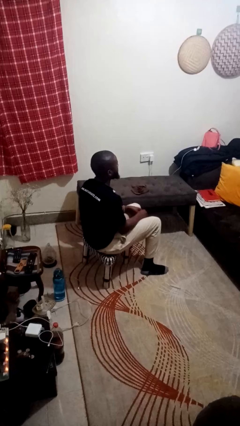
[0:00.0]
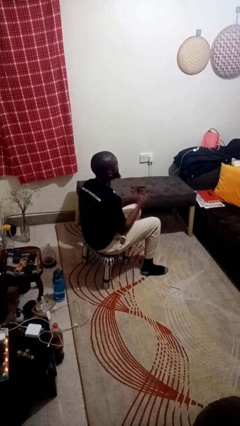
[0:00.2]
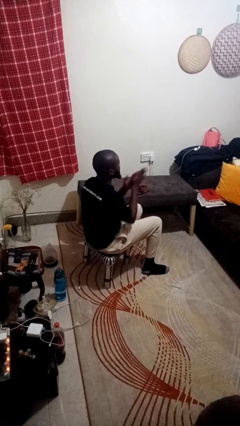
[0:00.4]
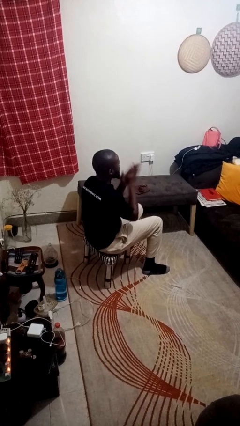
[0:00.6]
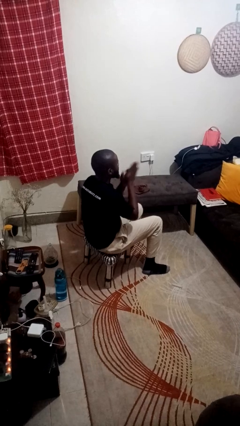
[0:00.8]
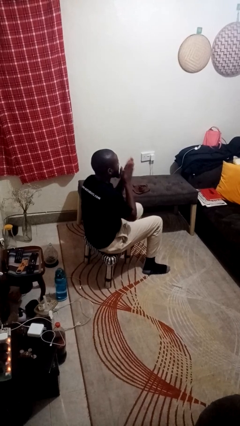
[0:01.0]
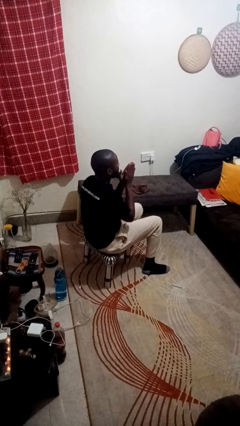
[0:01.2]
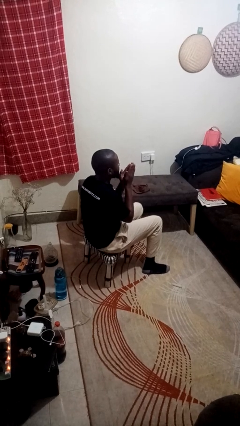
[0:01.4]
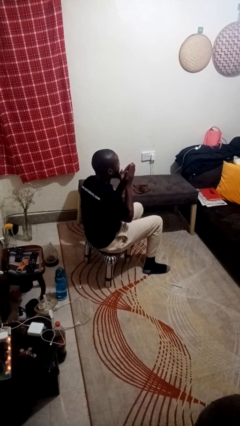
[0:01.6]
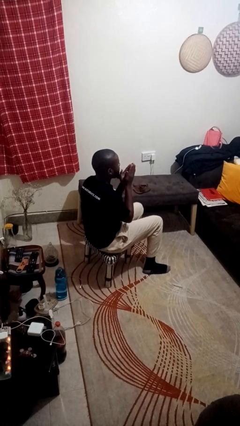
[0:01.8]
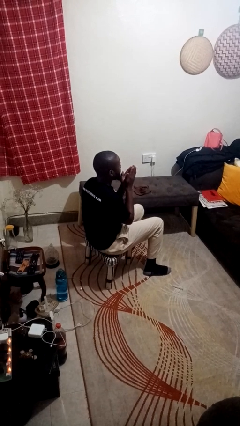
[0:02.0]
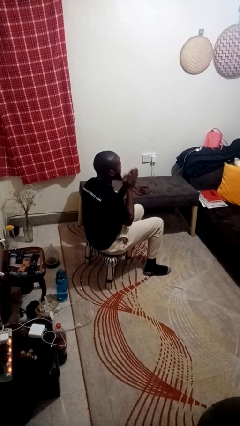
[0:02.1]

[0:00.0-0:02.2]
person blows into hands

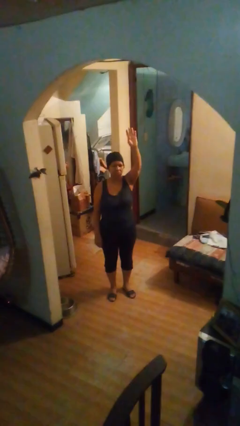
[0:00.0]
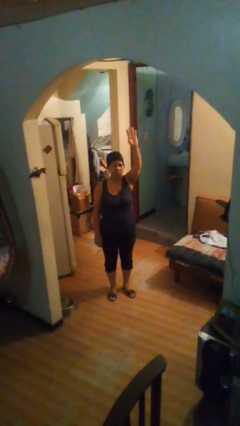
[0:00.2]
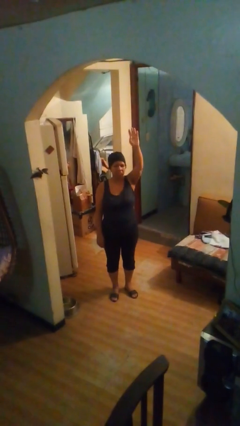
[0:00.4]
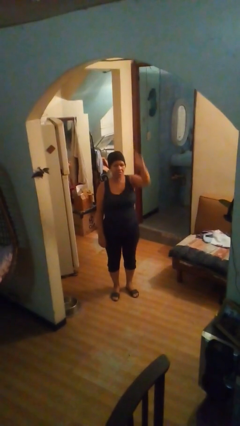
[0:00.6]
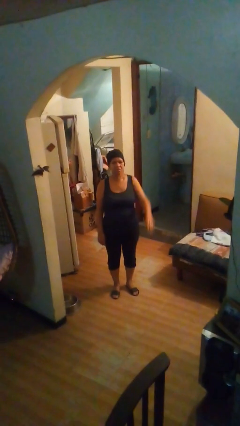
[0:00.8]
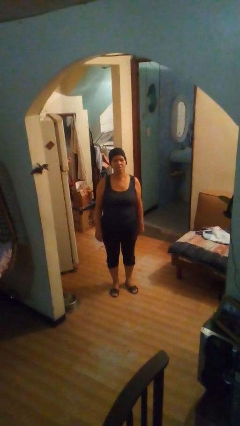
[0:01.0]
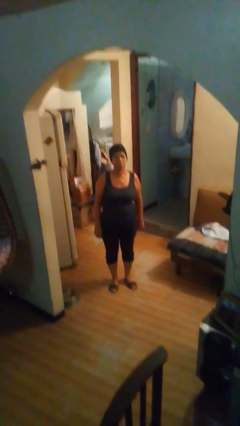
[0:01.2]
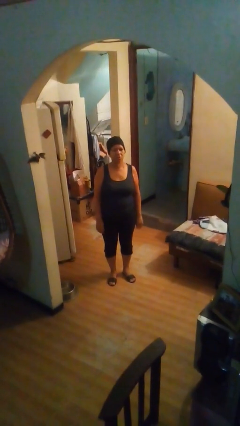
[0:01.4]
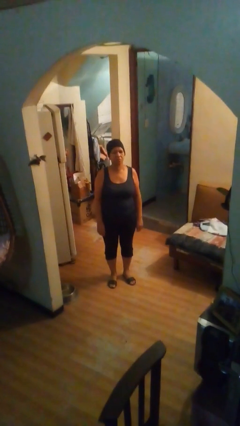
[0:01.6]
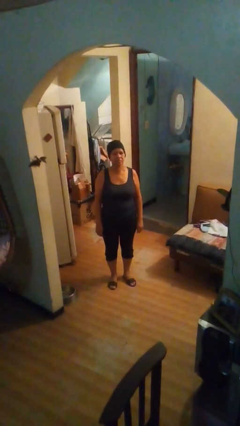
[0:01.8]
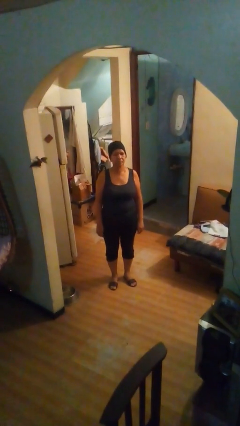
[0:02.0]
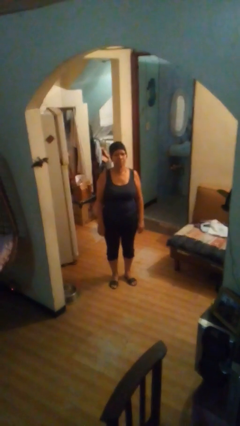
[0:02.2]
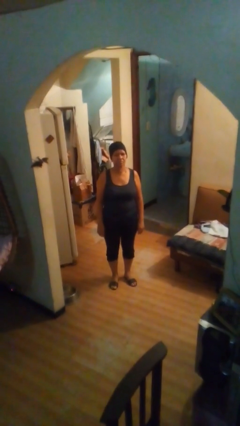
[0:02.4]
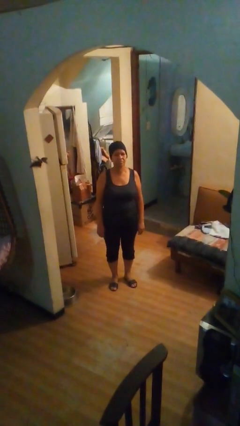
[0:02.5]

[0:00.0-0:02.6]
person gestures lower hand

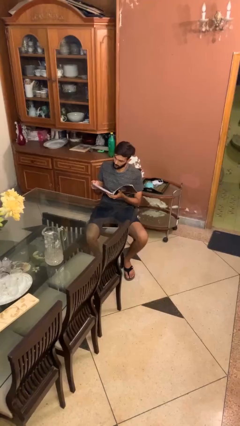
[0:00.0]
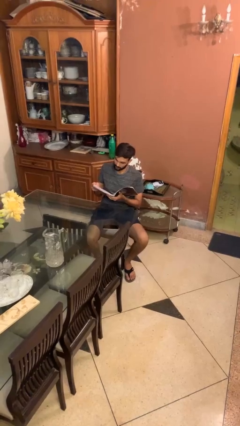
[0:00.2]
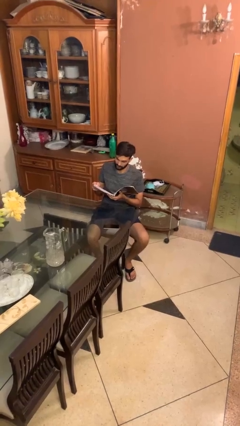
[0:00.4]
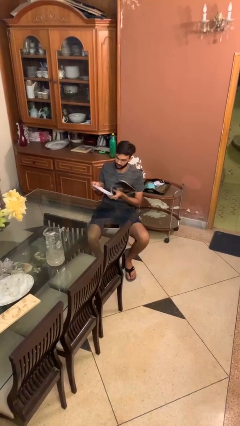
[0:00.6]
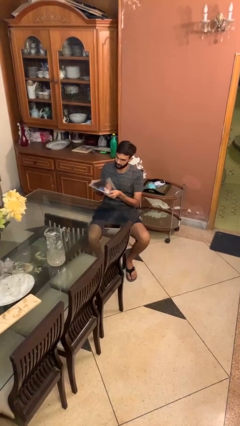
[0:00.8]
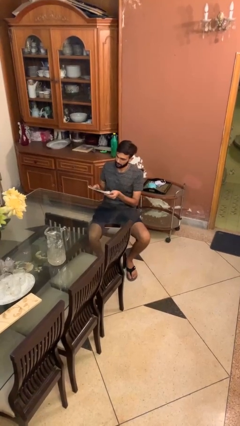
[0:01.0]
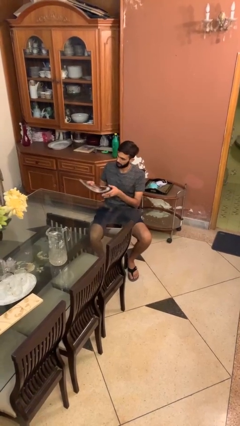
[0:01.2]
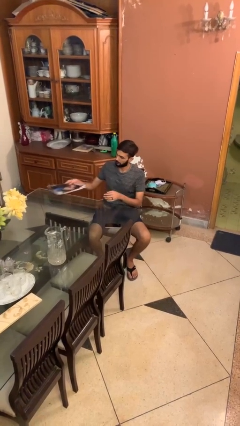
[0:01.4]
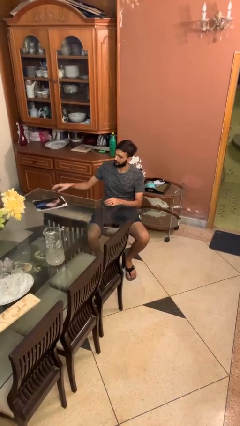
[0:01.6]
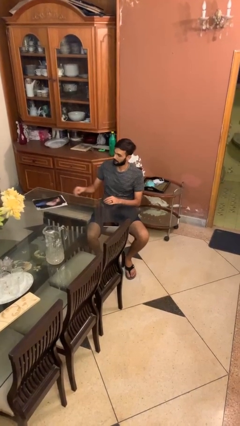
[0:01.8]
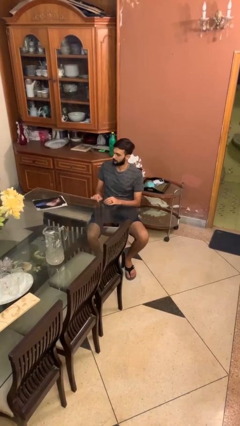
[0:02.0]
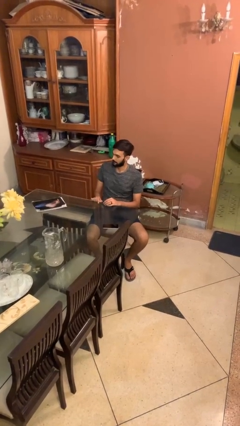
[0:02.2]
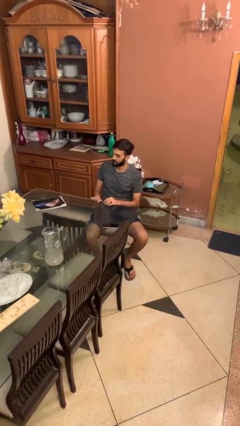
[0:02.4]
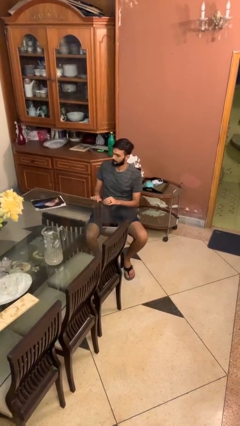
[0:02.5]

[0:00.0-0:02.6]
person puts down object on table

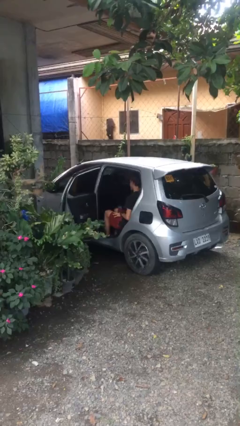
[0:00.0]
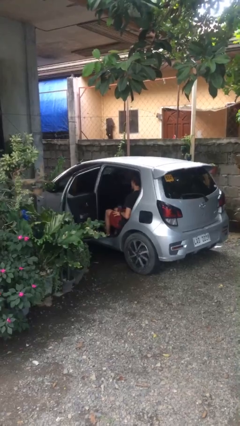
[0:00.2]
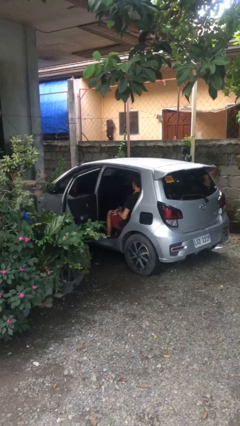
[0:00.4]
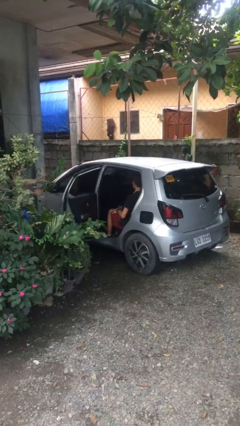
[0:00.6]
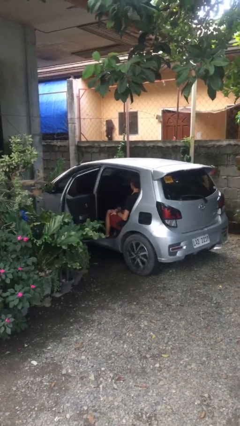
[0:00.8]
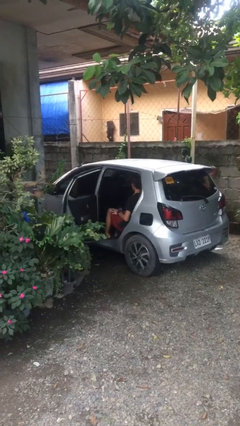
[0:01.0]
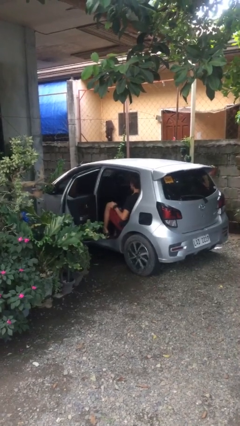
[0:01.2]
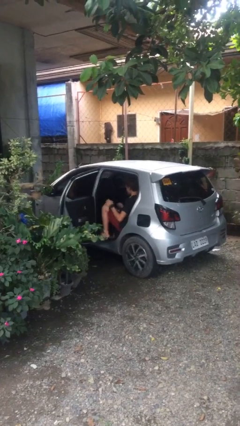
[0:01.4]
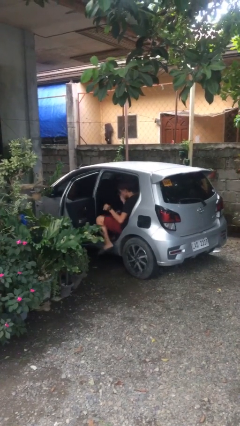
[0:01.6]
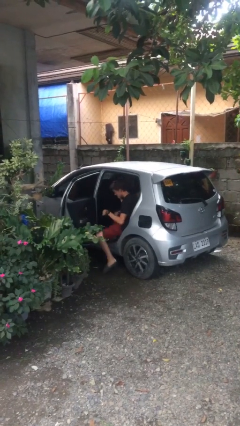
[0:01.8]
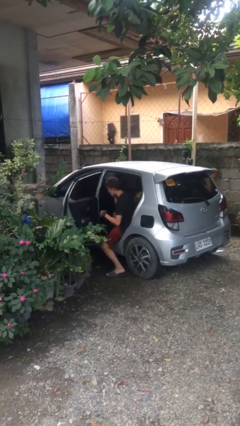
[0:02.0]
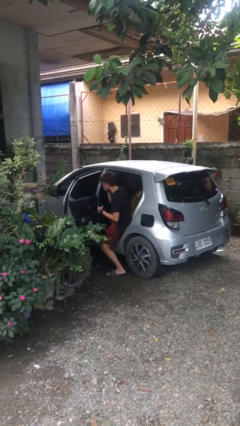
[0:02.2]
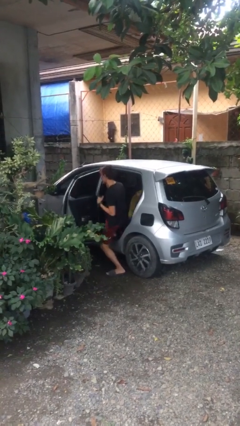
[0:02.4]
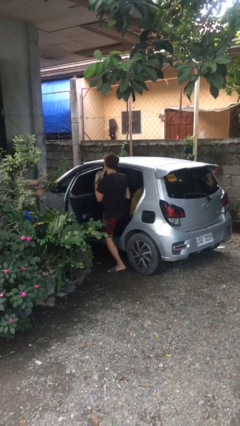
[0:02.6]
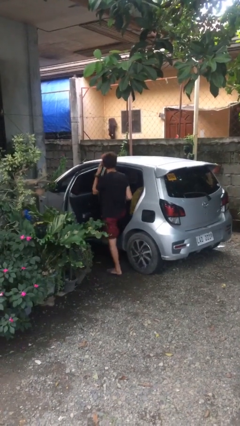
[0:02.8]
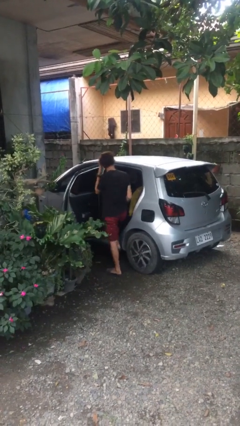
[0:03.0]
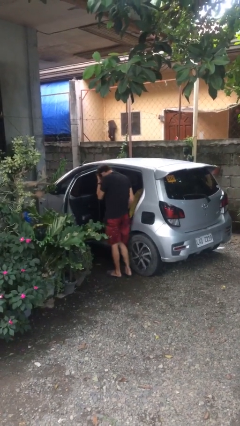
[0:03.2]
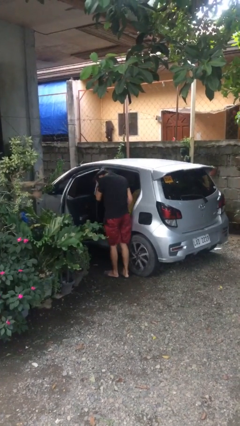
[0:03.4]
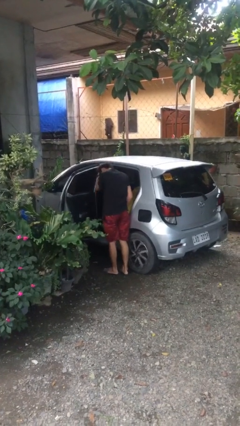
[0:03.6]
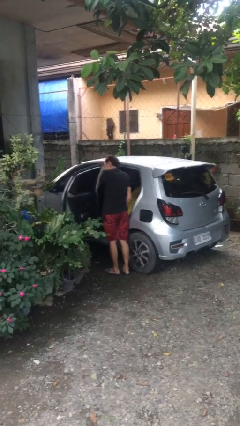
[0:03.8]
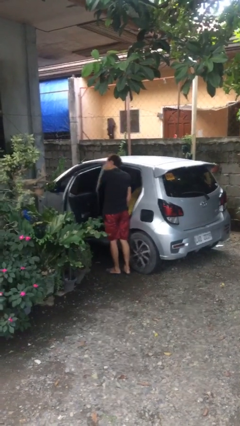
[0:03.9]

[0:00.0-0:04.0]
person exits car

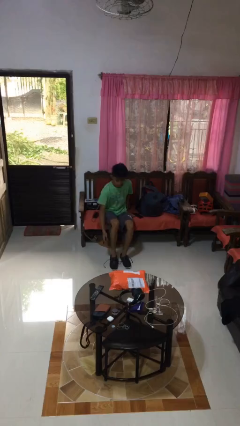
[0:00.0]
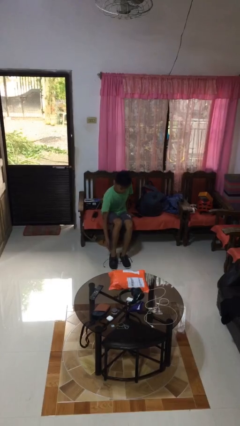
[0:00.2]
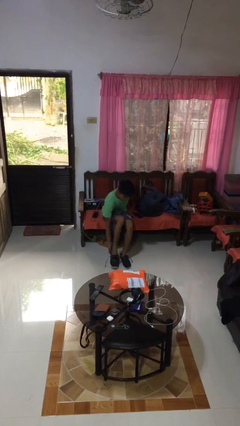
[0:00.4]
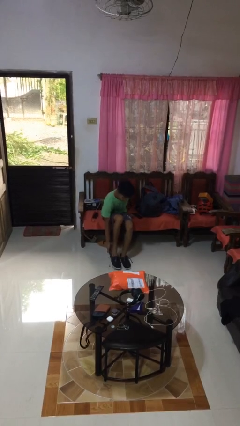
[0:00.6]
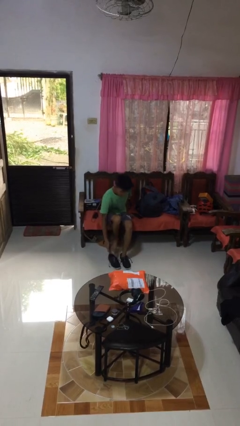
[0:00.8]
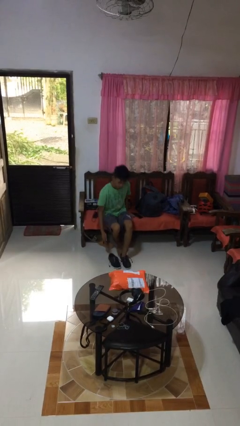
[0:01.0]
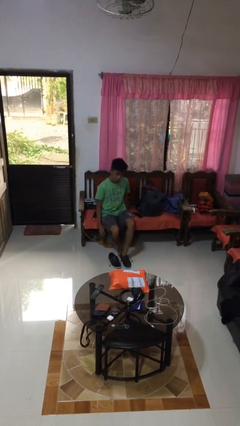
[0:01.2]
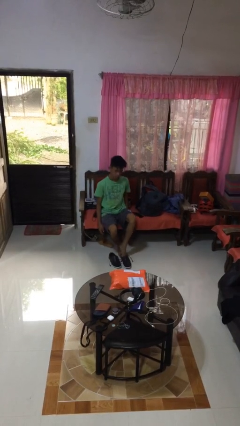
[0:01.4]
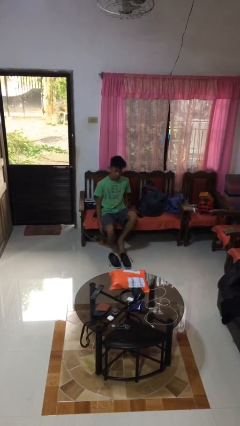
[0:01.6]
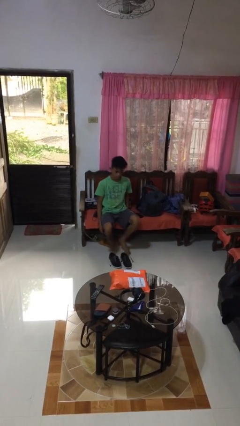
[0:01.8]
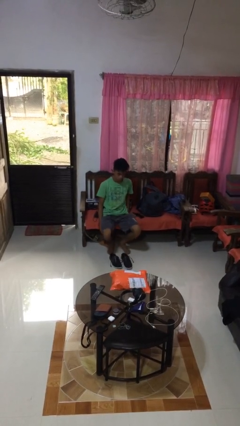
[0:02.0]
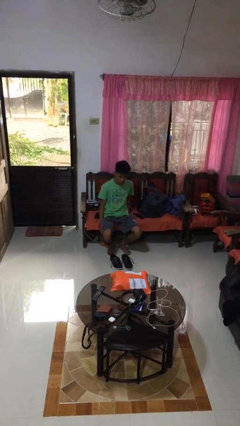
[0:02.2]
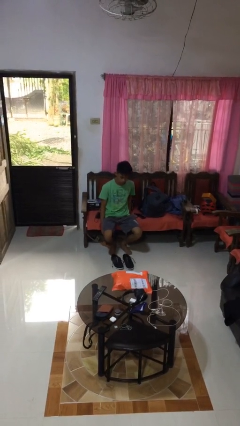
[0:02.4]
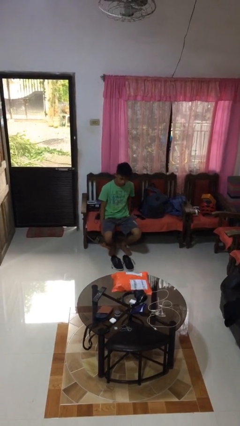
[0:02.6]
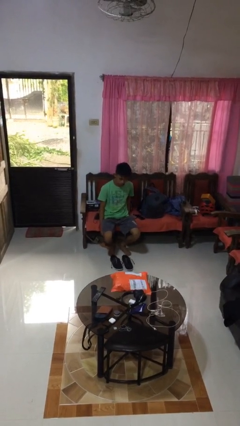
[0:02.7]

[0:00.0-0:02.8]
person takes off shoes

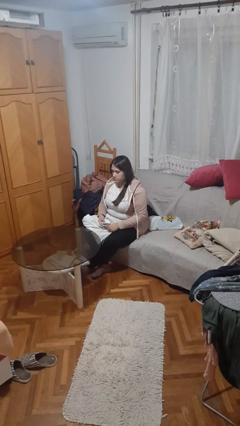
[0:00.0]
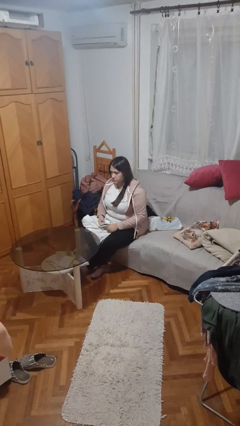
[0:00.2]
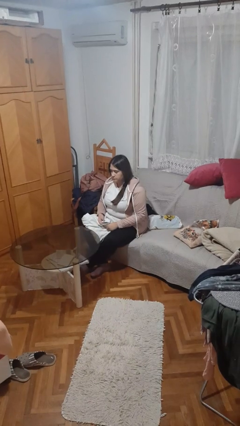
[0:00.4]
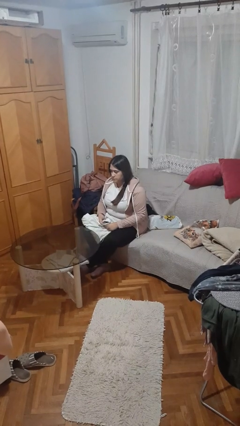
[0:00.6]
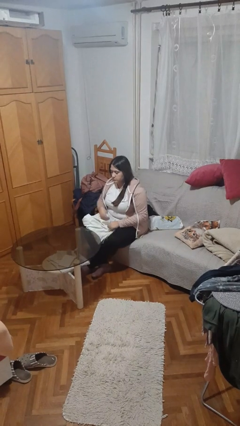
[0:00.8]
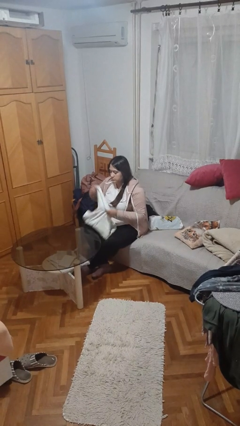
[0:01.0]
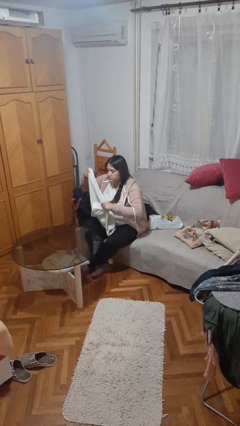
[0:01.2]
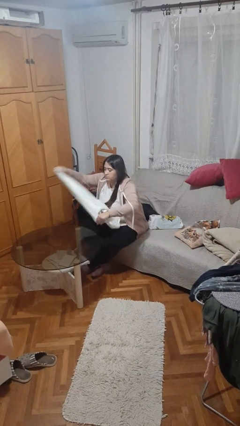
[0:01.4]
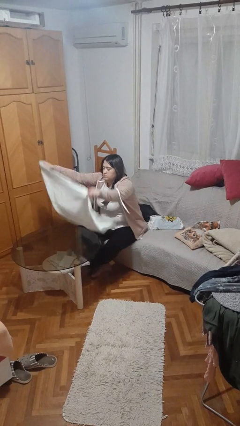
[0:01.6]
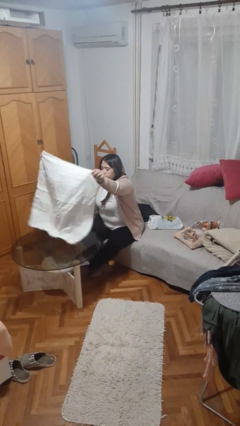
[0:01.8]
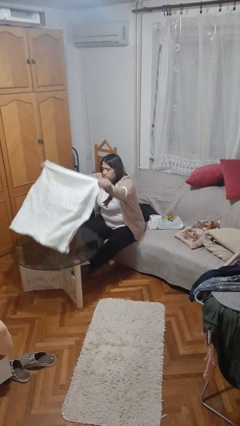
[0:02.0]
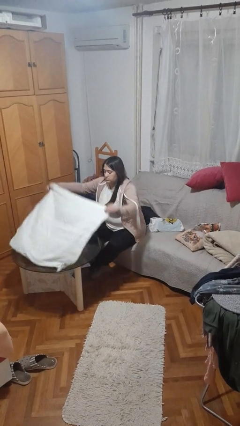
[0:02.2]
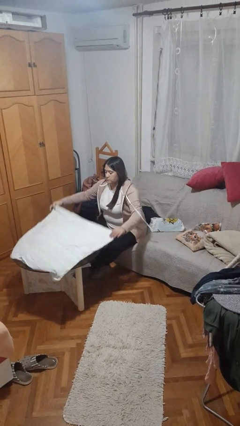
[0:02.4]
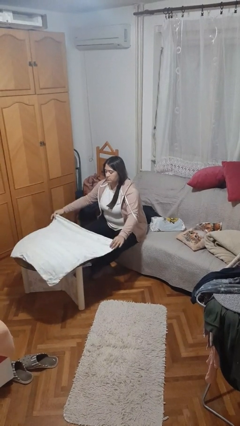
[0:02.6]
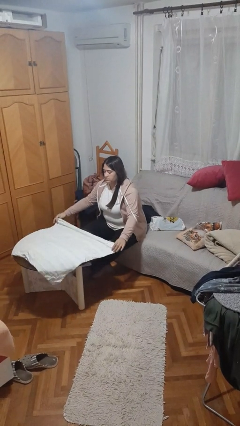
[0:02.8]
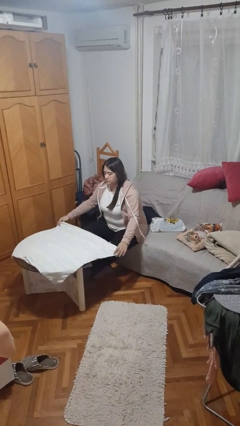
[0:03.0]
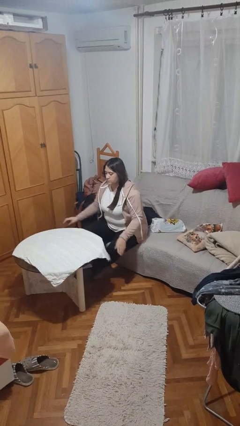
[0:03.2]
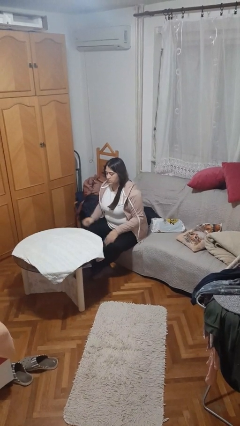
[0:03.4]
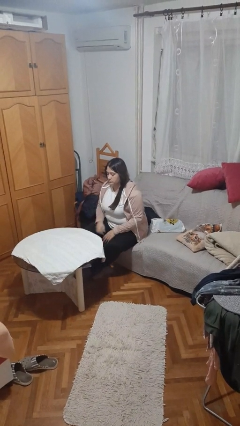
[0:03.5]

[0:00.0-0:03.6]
person spreads tablecloth
